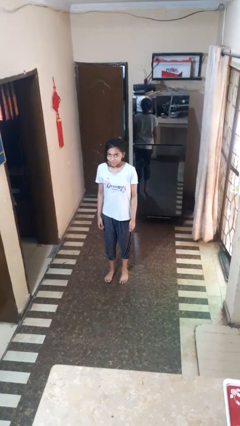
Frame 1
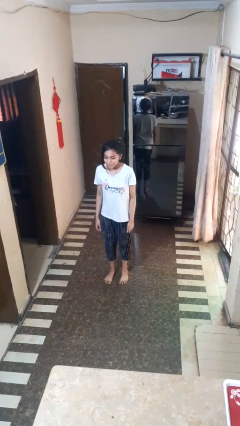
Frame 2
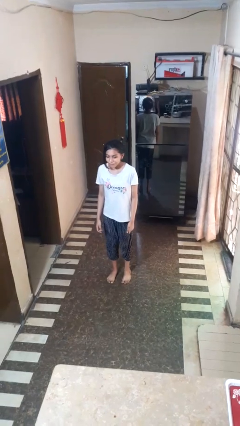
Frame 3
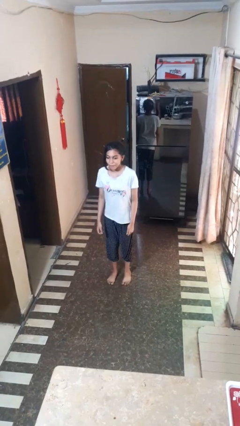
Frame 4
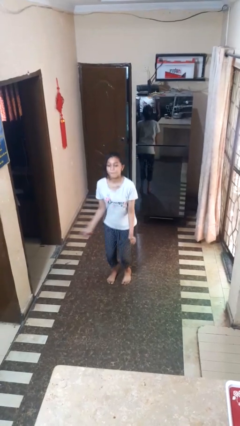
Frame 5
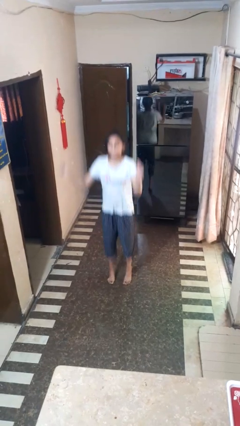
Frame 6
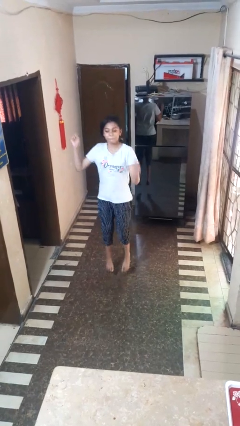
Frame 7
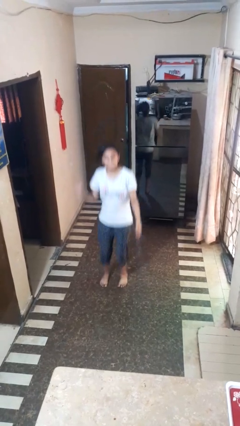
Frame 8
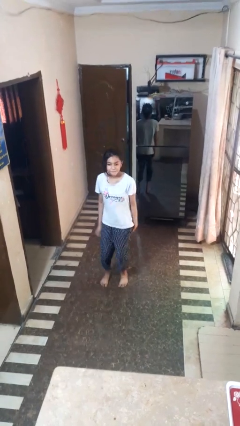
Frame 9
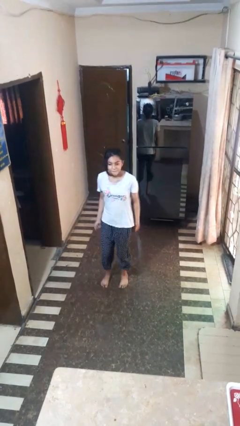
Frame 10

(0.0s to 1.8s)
person jumps

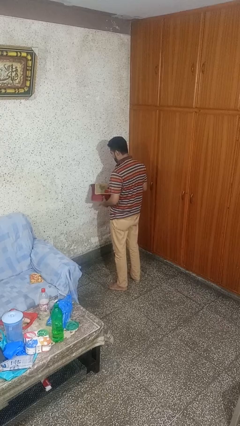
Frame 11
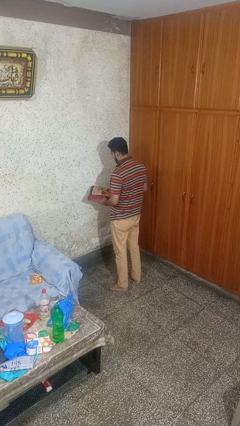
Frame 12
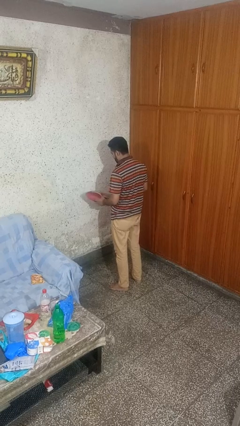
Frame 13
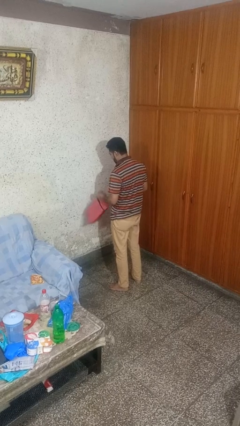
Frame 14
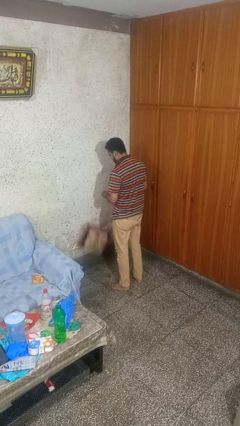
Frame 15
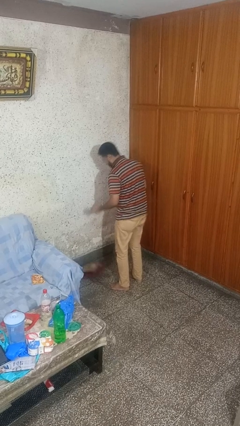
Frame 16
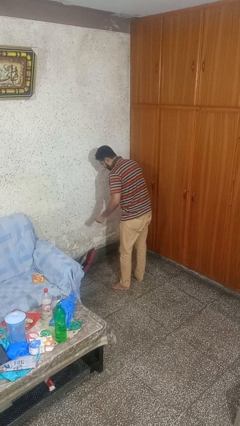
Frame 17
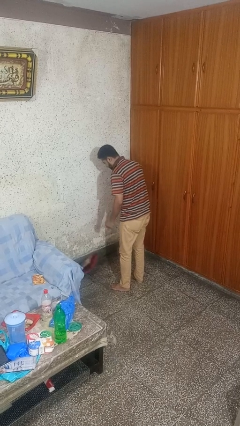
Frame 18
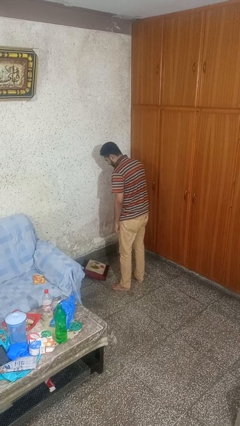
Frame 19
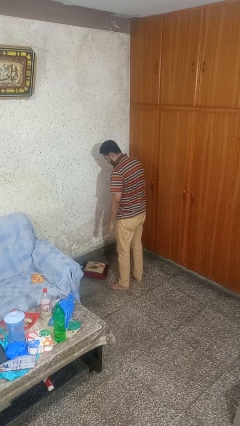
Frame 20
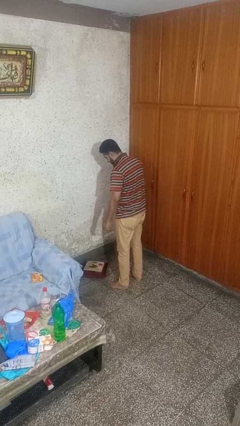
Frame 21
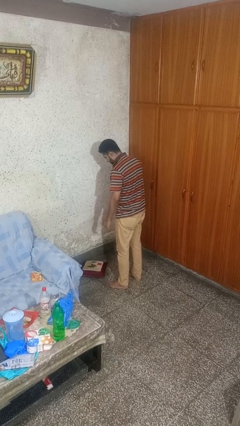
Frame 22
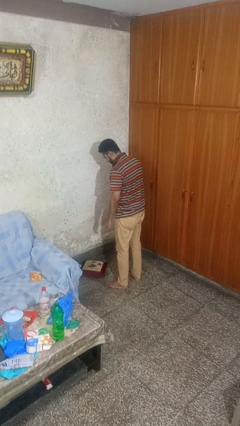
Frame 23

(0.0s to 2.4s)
person drops object

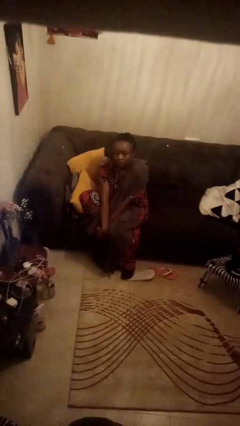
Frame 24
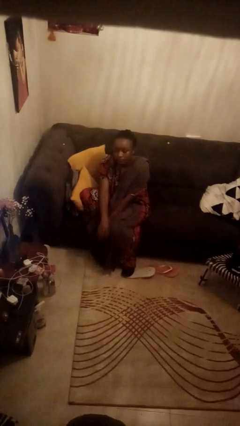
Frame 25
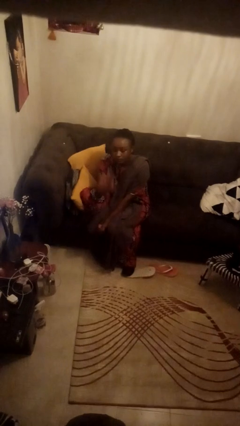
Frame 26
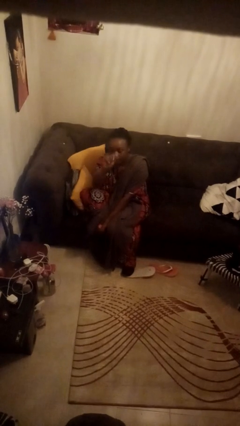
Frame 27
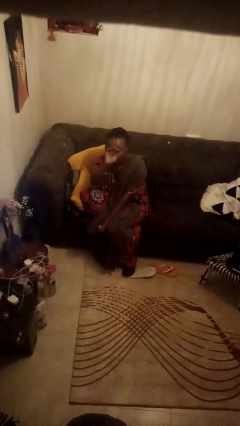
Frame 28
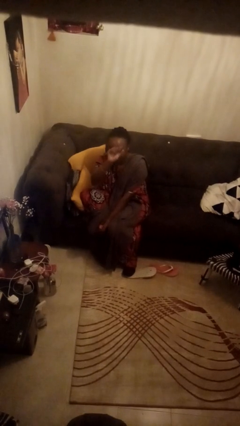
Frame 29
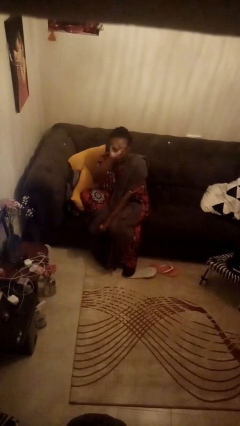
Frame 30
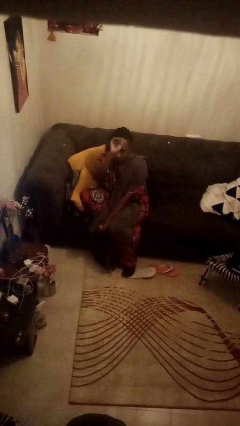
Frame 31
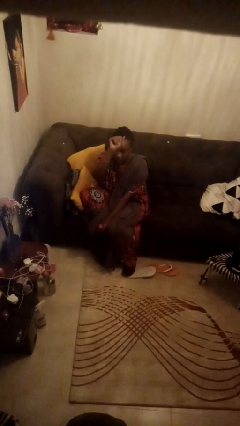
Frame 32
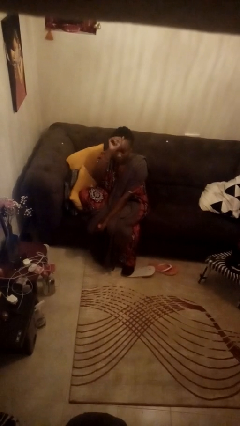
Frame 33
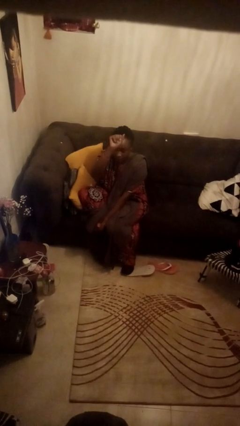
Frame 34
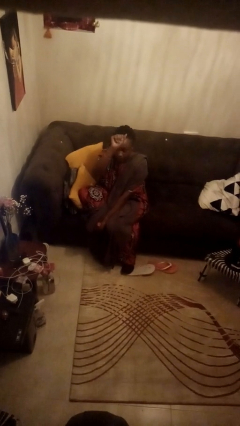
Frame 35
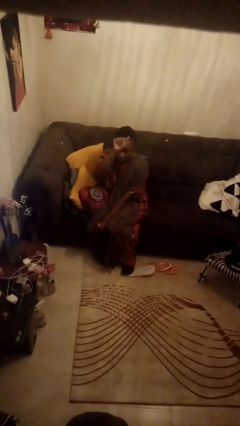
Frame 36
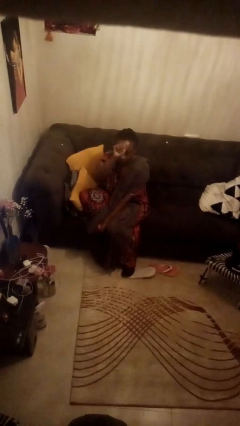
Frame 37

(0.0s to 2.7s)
person gestures come here

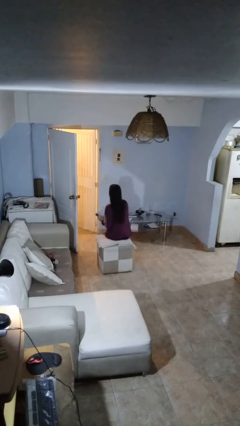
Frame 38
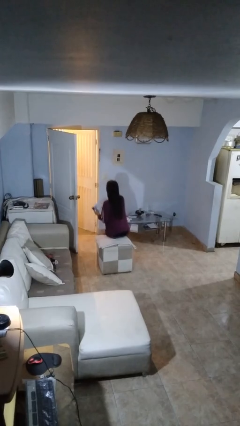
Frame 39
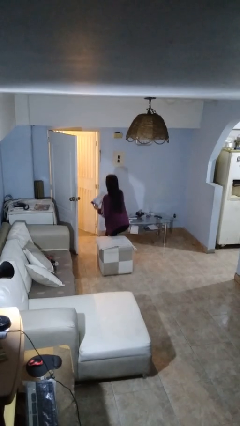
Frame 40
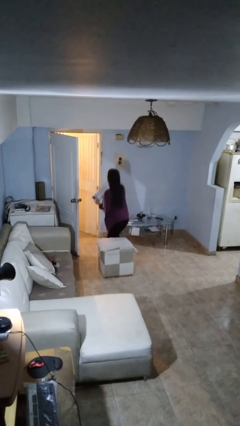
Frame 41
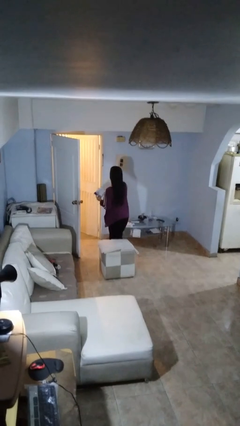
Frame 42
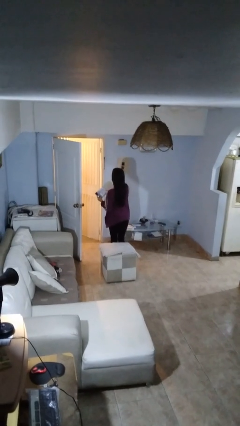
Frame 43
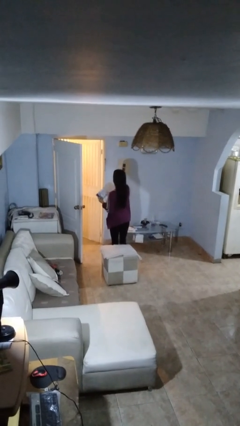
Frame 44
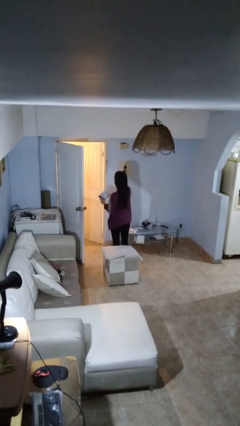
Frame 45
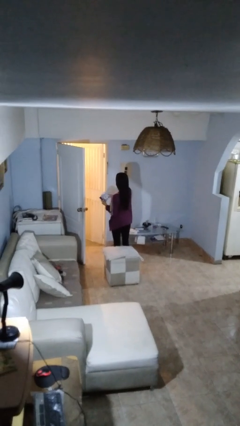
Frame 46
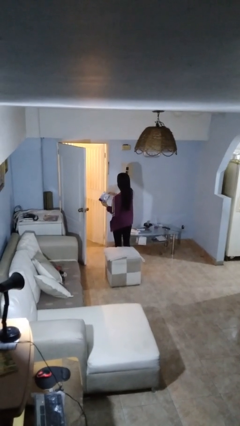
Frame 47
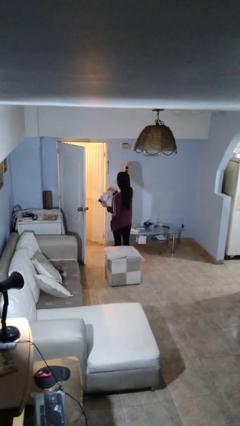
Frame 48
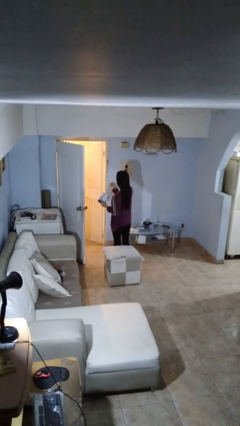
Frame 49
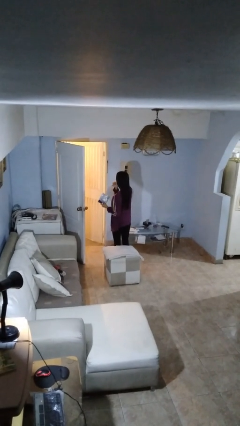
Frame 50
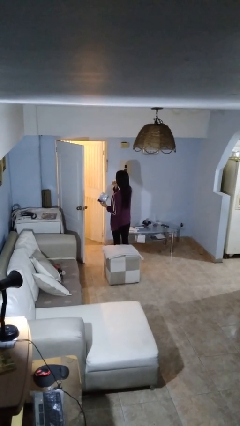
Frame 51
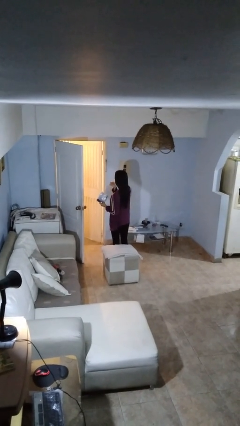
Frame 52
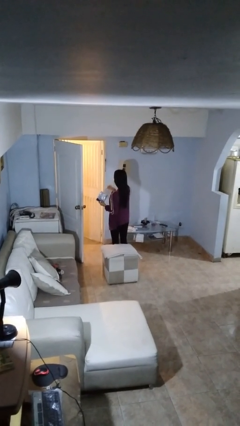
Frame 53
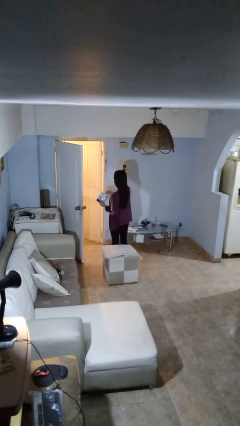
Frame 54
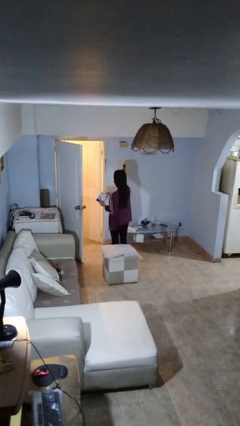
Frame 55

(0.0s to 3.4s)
person eats snack from bag

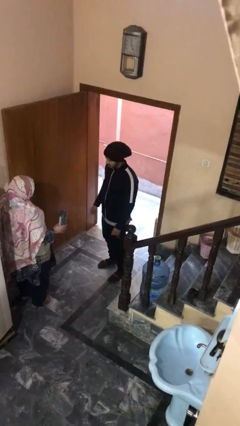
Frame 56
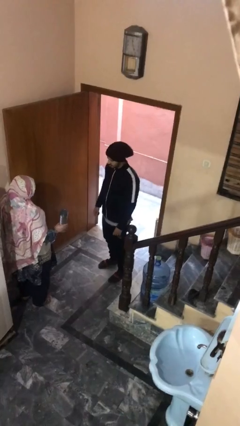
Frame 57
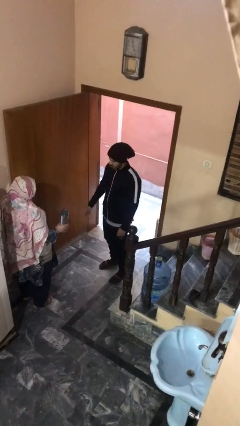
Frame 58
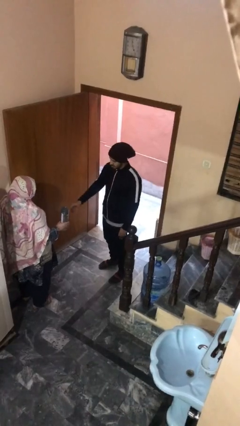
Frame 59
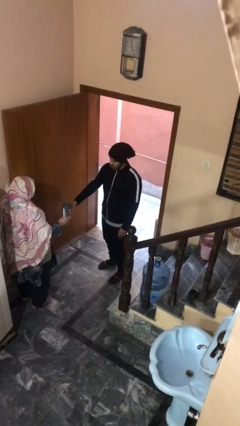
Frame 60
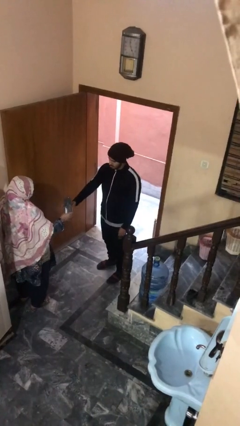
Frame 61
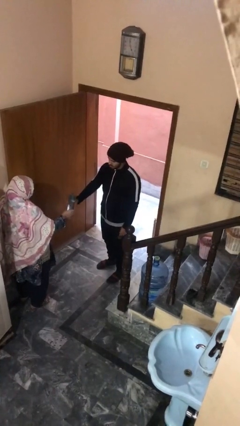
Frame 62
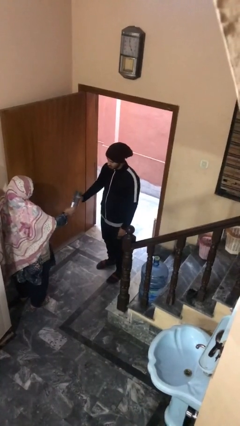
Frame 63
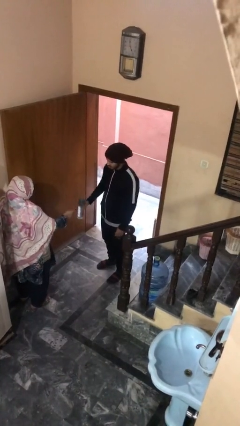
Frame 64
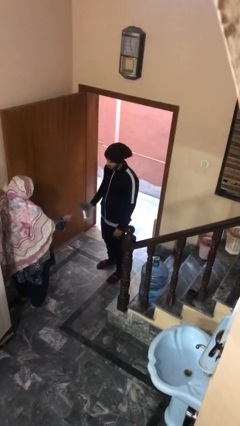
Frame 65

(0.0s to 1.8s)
person transfers object to person

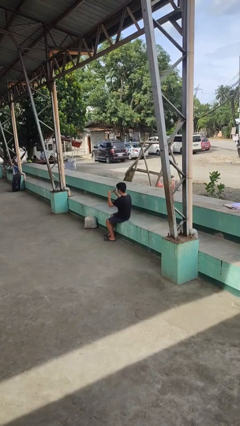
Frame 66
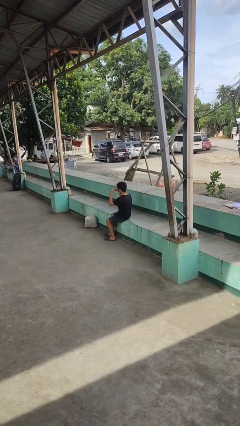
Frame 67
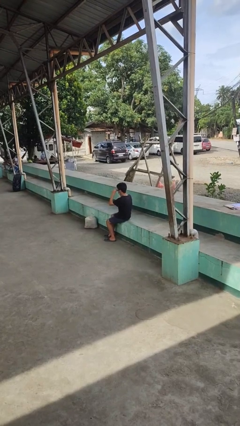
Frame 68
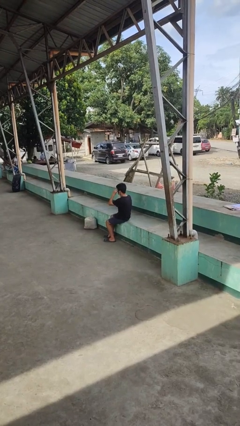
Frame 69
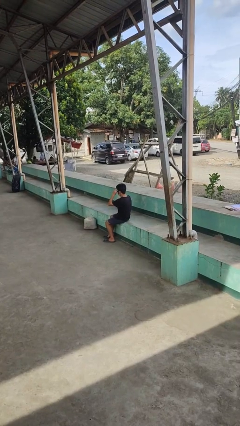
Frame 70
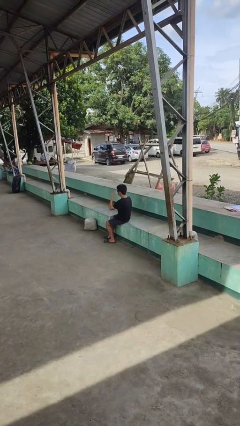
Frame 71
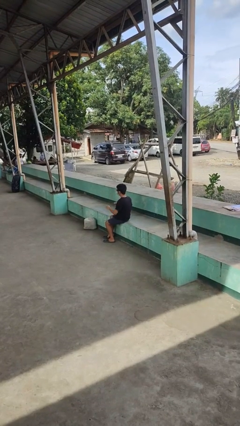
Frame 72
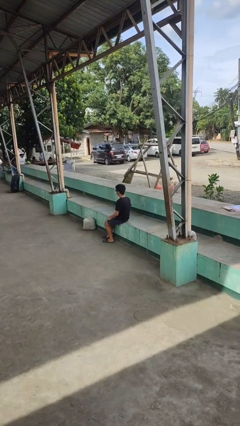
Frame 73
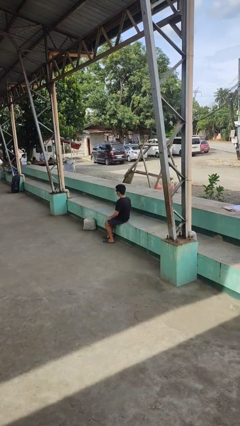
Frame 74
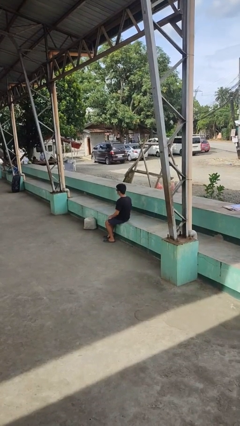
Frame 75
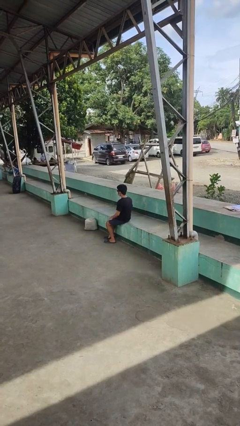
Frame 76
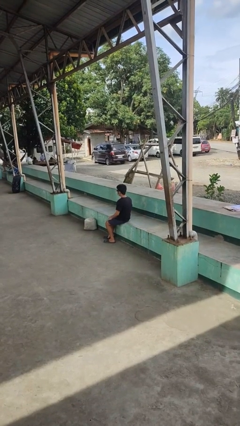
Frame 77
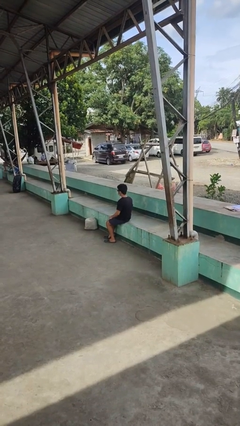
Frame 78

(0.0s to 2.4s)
person puts on sunglasses

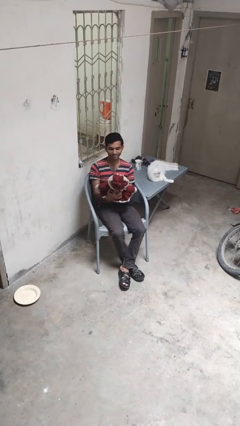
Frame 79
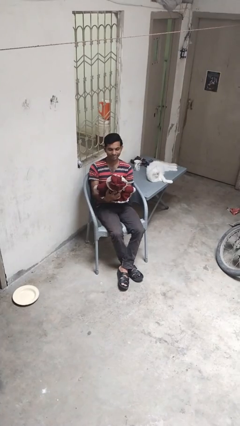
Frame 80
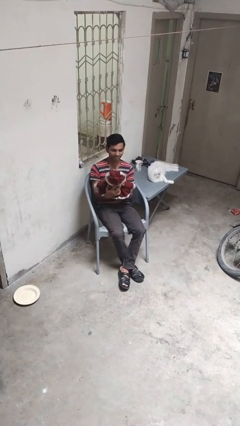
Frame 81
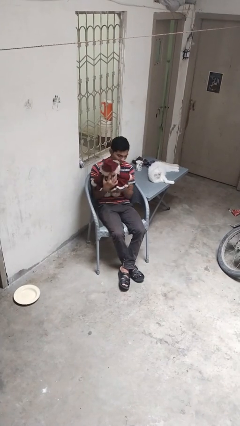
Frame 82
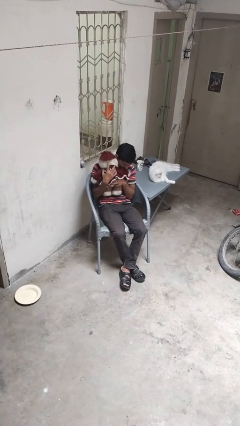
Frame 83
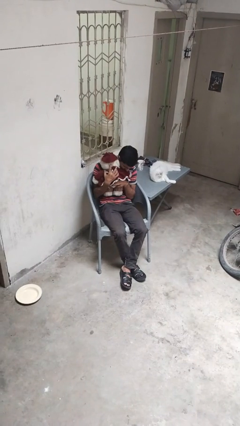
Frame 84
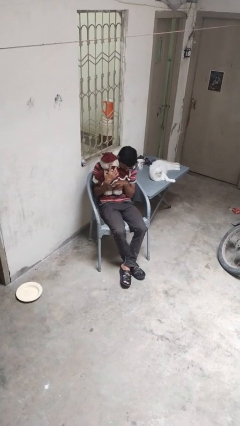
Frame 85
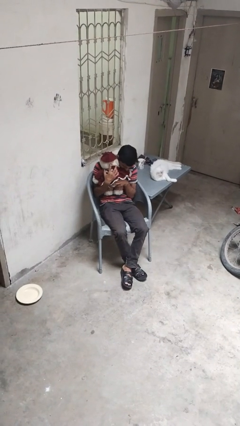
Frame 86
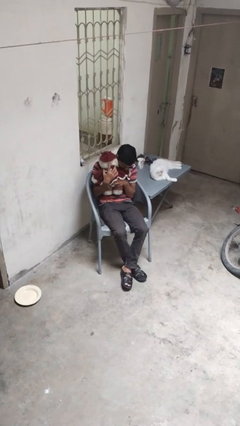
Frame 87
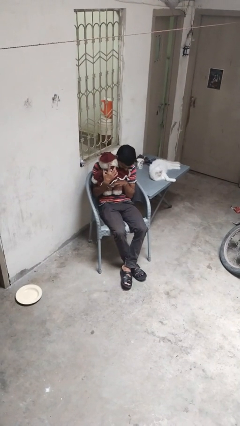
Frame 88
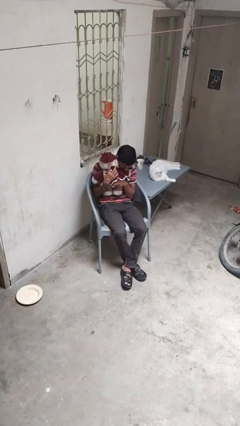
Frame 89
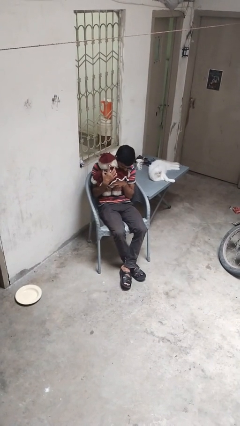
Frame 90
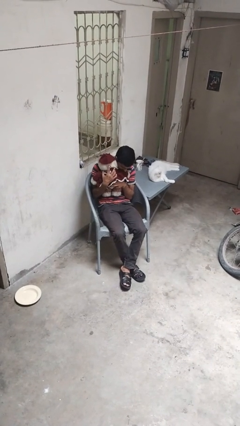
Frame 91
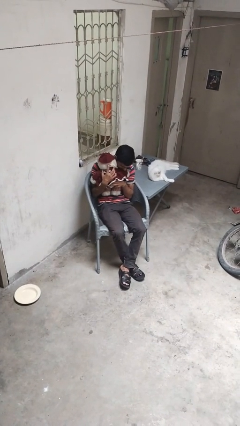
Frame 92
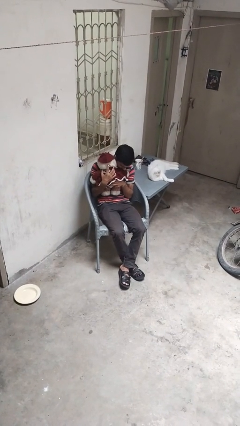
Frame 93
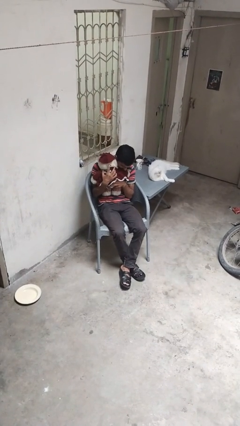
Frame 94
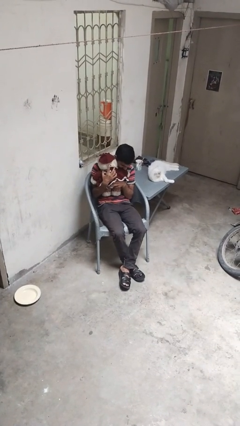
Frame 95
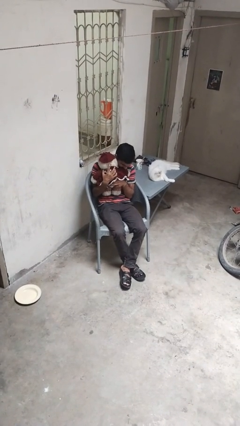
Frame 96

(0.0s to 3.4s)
person hugs stuffed animal
